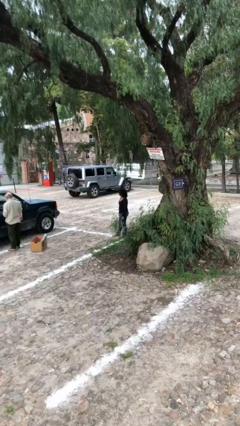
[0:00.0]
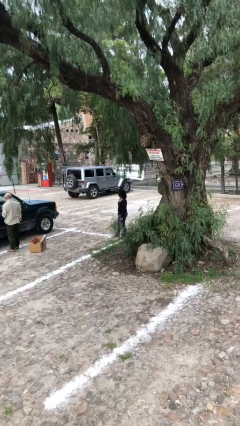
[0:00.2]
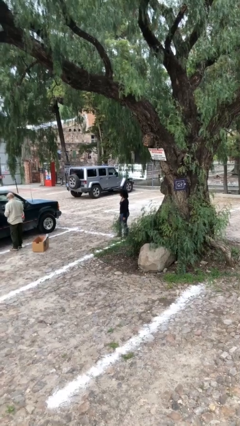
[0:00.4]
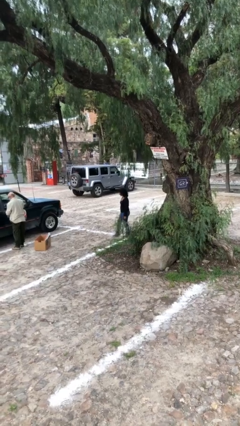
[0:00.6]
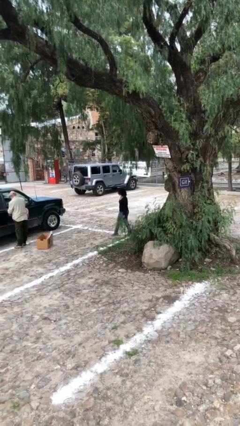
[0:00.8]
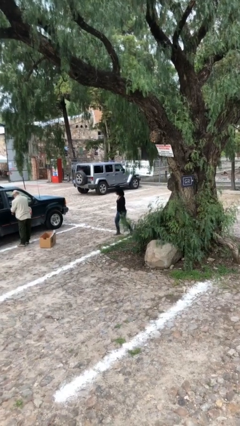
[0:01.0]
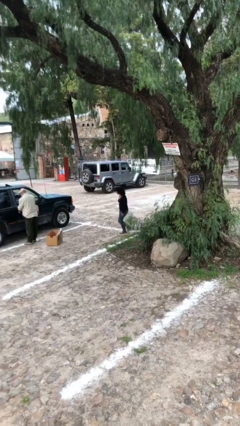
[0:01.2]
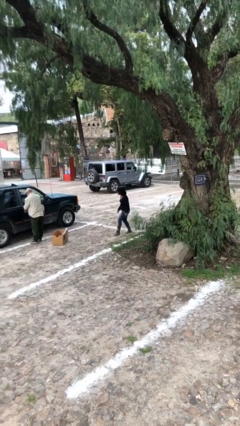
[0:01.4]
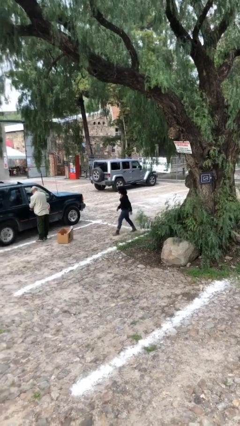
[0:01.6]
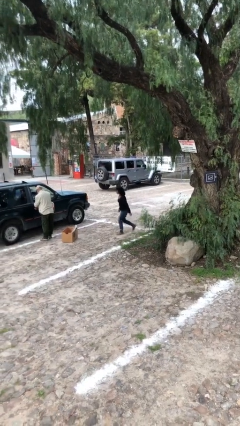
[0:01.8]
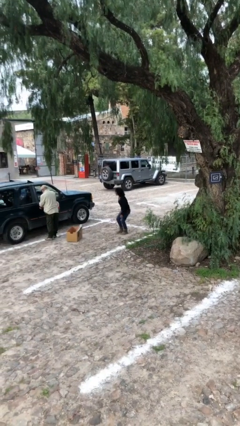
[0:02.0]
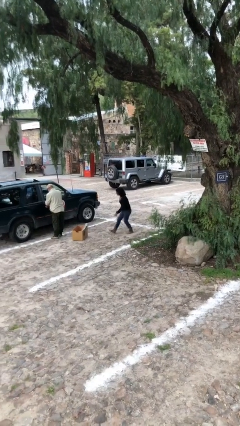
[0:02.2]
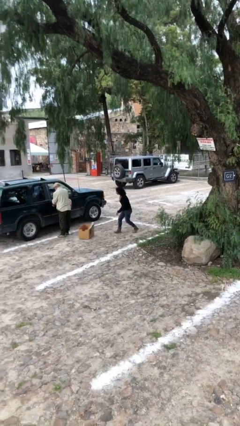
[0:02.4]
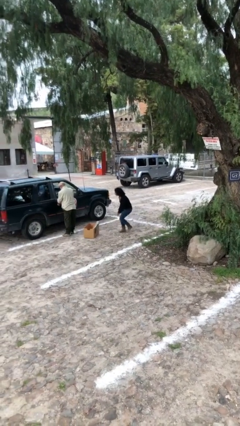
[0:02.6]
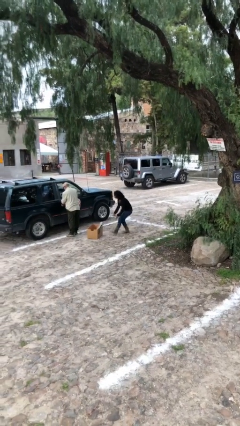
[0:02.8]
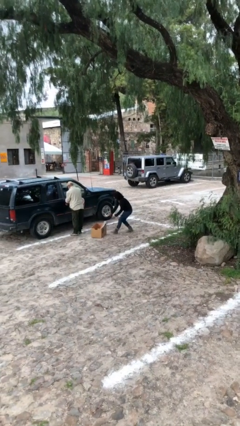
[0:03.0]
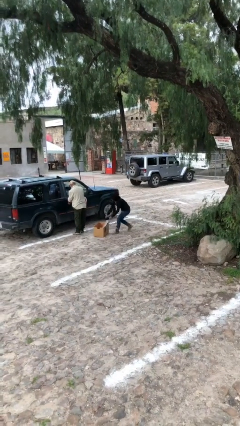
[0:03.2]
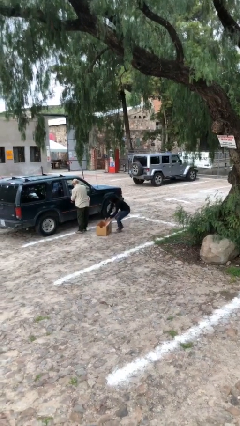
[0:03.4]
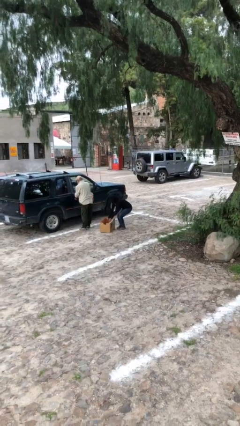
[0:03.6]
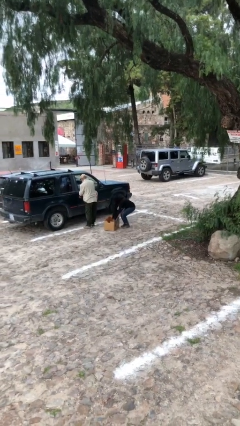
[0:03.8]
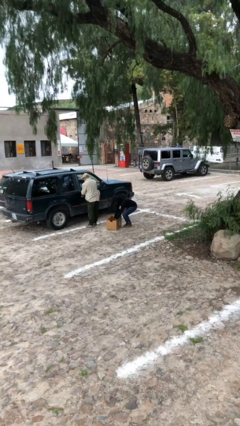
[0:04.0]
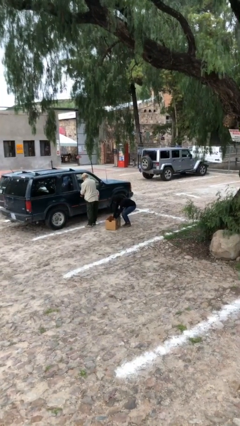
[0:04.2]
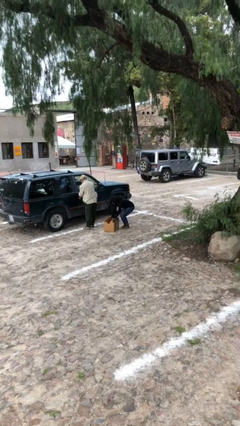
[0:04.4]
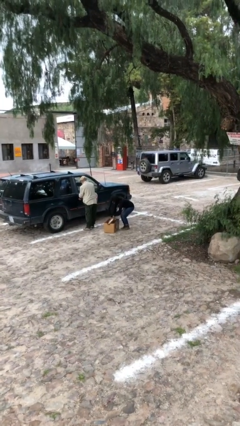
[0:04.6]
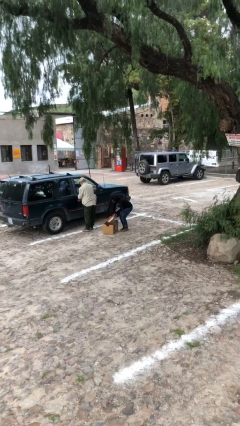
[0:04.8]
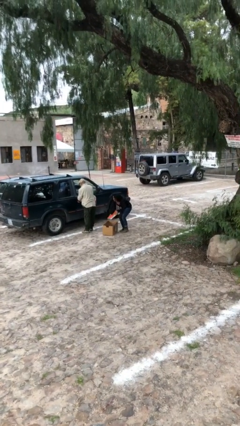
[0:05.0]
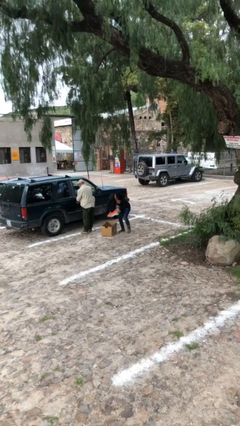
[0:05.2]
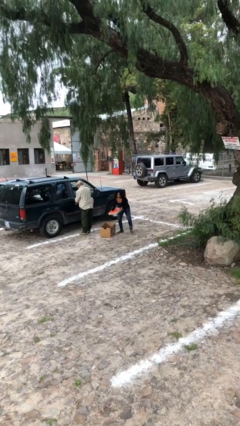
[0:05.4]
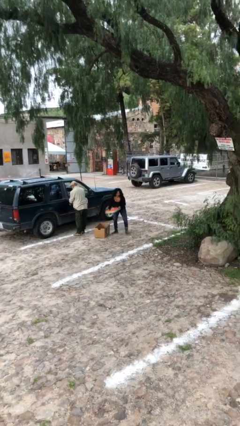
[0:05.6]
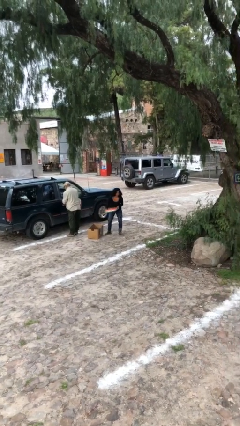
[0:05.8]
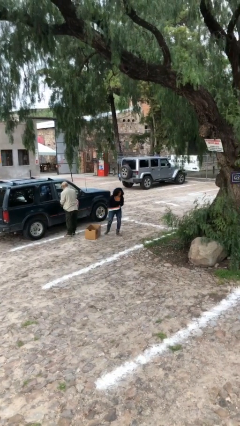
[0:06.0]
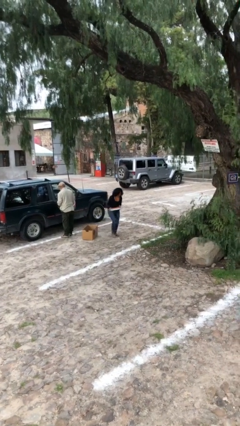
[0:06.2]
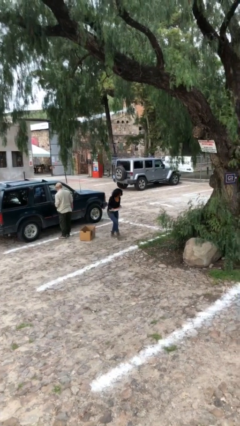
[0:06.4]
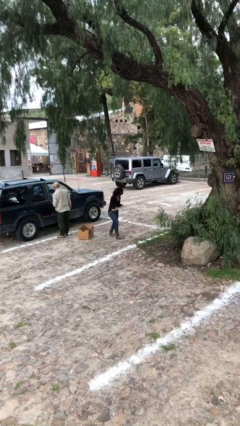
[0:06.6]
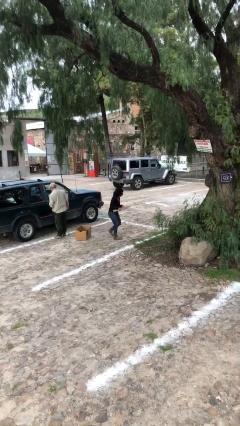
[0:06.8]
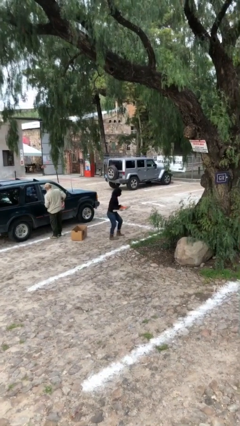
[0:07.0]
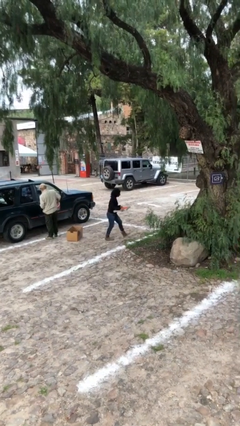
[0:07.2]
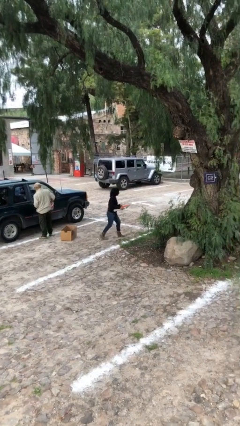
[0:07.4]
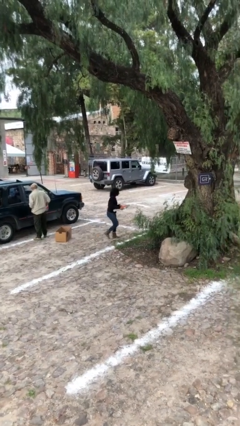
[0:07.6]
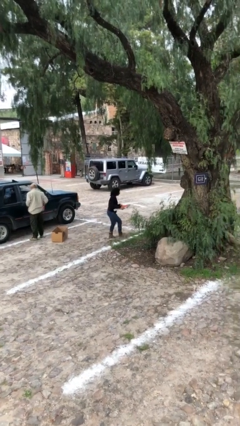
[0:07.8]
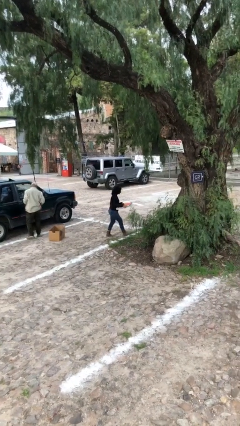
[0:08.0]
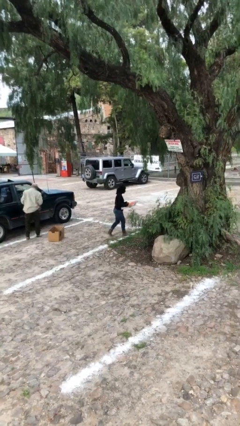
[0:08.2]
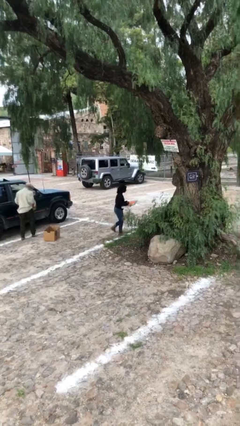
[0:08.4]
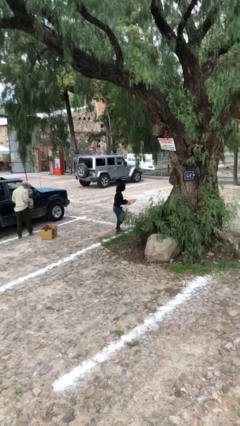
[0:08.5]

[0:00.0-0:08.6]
person steals object from person

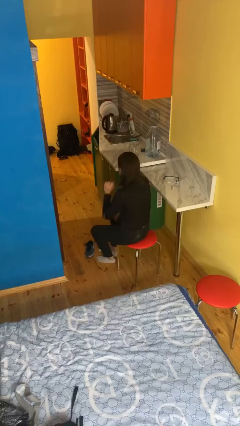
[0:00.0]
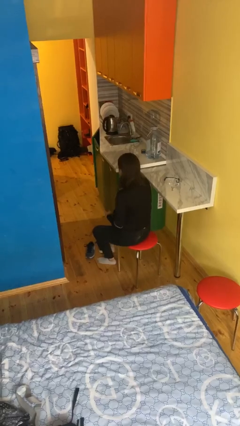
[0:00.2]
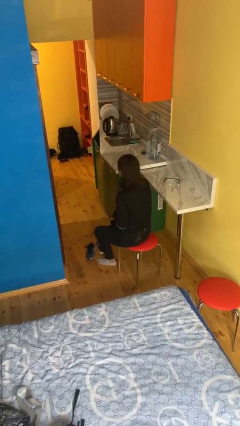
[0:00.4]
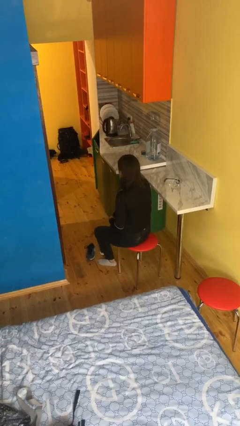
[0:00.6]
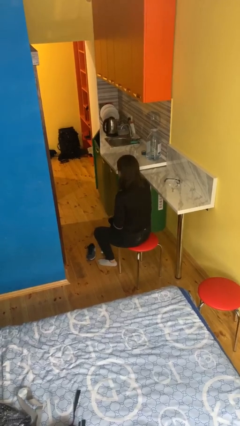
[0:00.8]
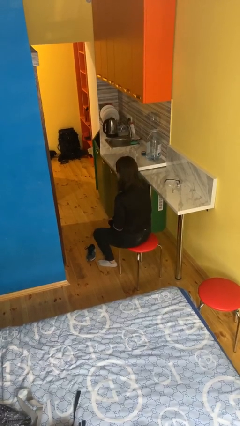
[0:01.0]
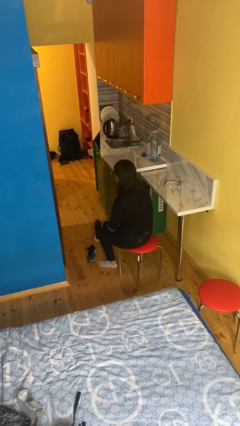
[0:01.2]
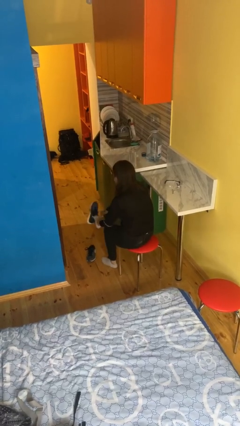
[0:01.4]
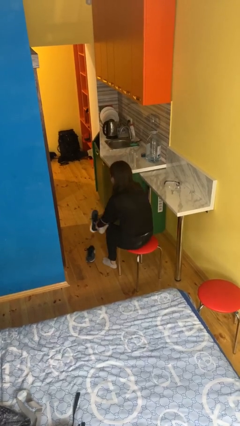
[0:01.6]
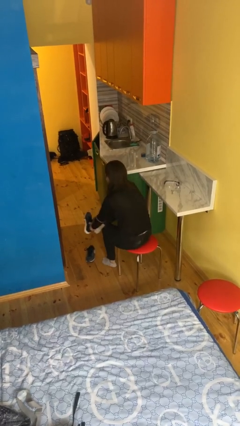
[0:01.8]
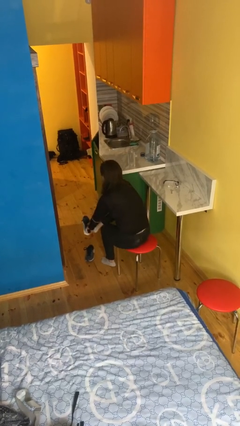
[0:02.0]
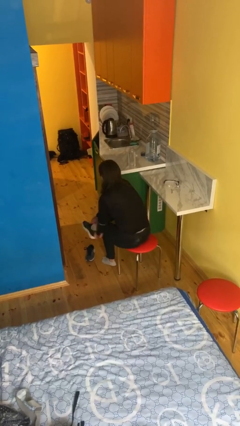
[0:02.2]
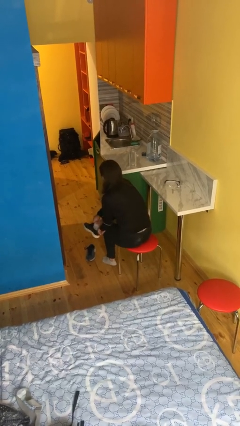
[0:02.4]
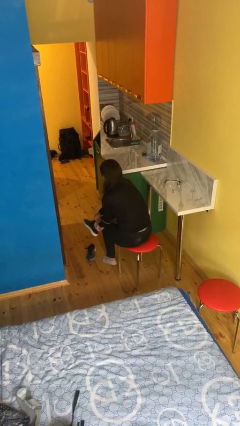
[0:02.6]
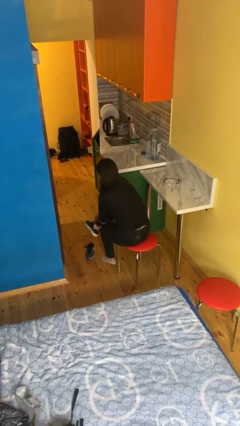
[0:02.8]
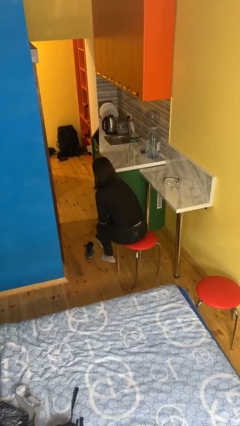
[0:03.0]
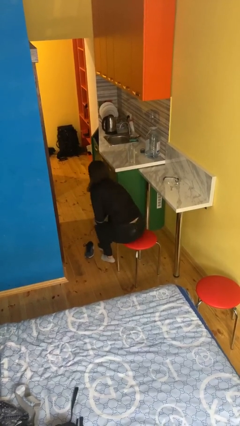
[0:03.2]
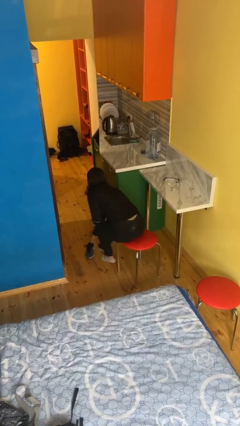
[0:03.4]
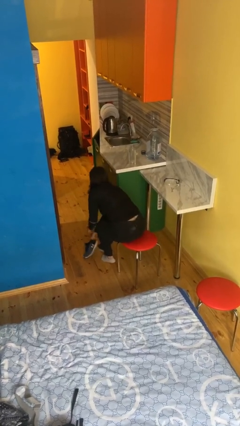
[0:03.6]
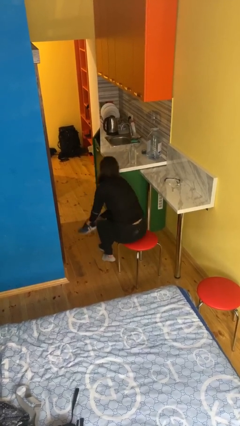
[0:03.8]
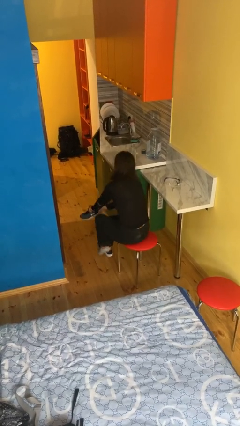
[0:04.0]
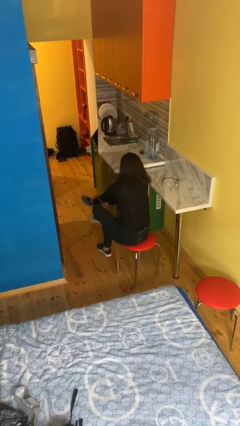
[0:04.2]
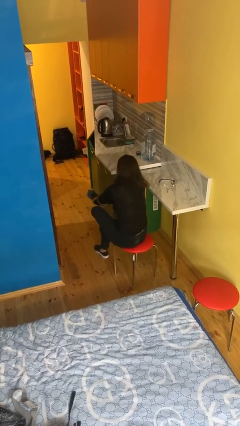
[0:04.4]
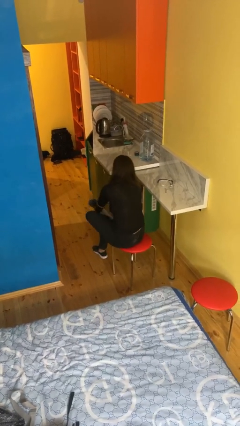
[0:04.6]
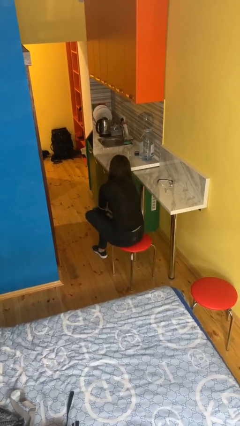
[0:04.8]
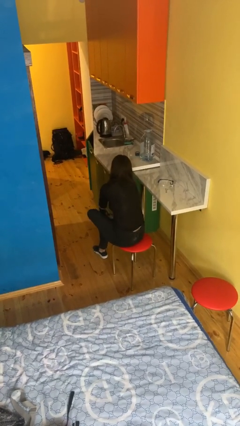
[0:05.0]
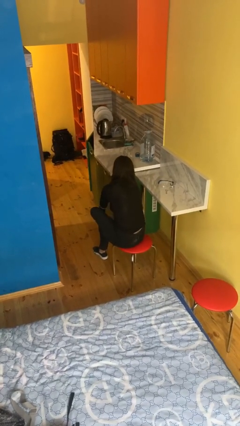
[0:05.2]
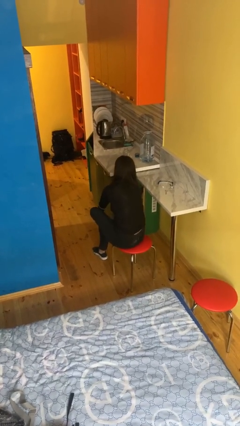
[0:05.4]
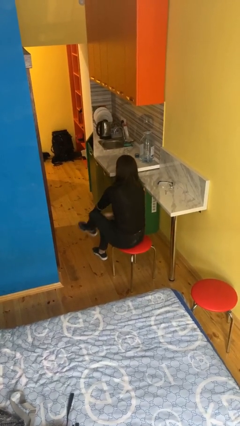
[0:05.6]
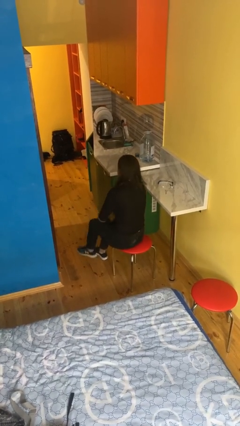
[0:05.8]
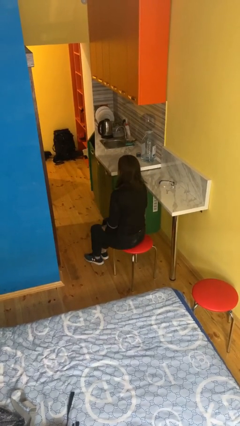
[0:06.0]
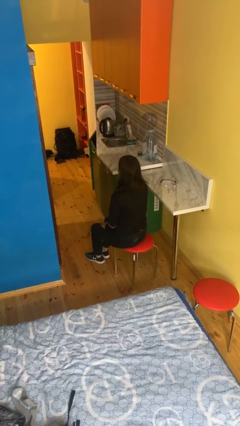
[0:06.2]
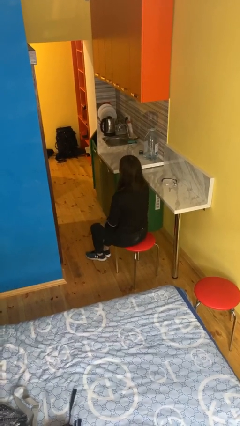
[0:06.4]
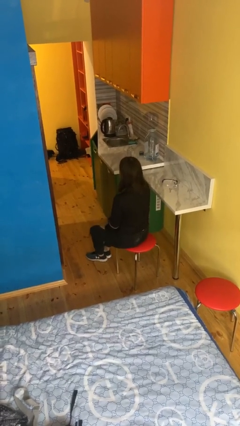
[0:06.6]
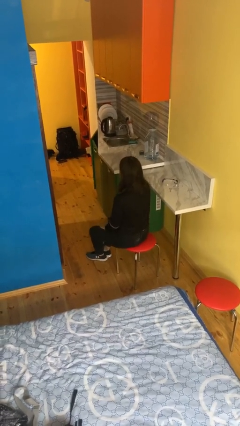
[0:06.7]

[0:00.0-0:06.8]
person puts on shoes

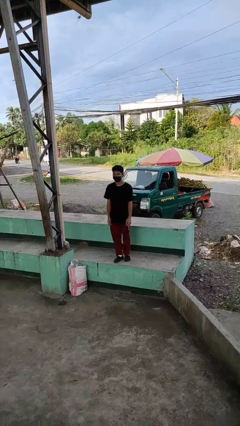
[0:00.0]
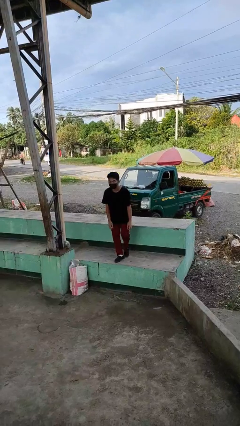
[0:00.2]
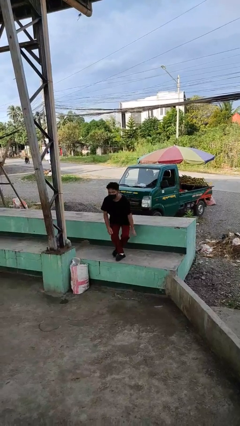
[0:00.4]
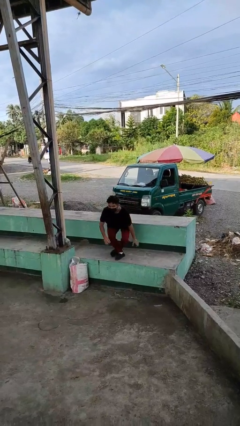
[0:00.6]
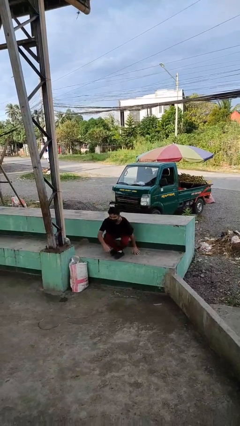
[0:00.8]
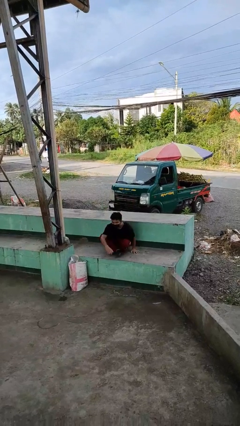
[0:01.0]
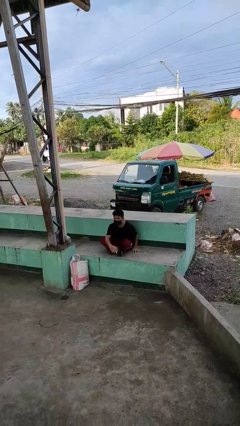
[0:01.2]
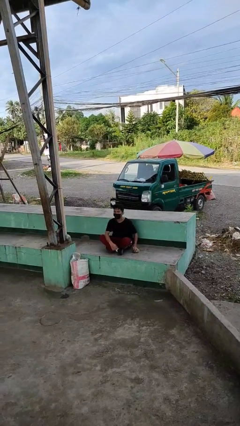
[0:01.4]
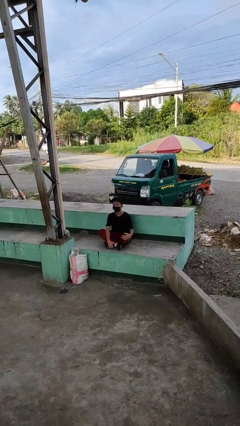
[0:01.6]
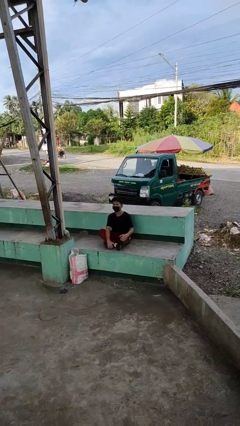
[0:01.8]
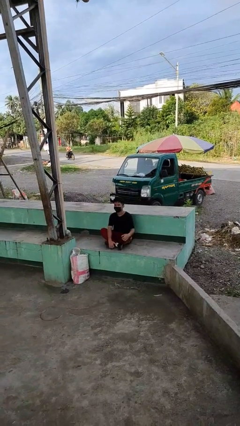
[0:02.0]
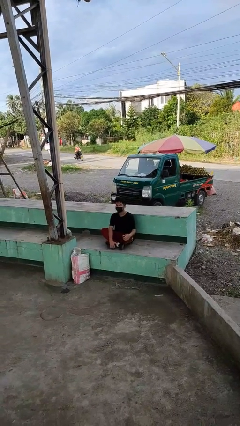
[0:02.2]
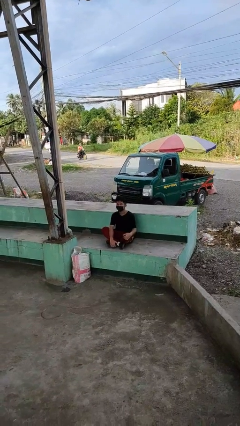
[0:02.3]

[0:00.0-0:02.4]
person sits crisscross

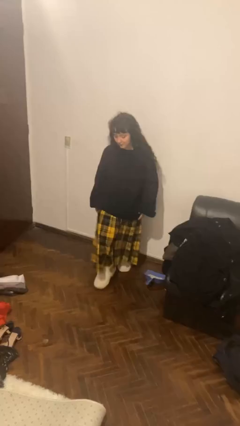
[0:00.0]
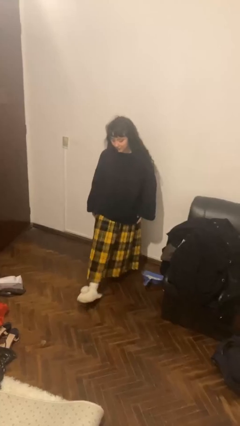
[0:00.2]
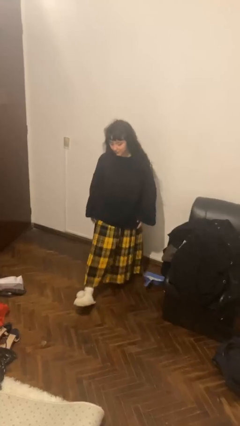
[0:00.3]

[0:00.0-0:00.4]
person stands up from floor
